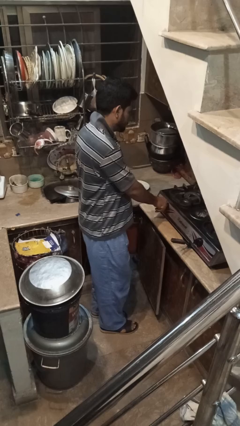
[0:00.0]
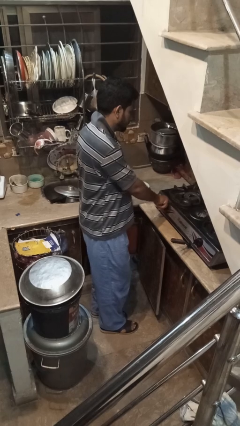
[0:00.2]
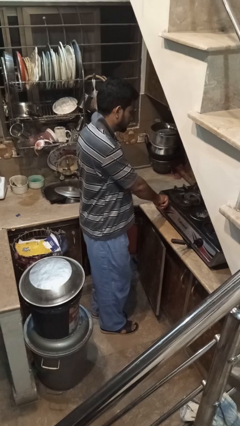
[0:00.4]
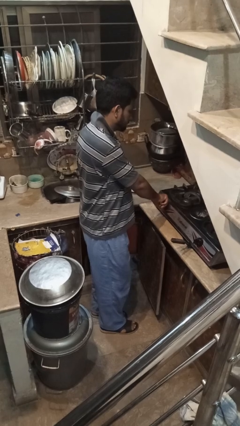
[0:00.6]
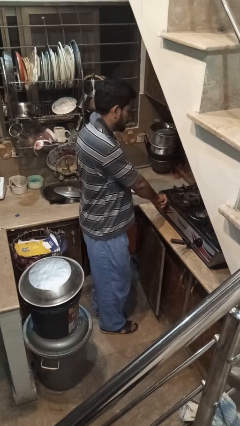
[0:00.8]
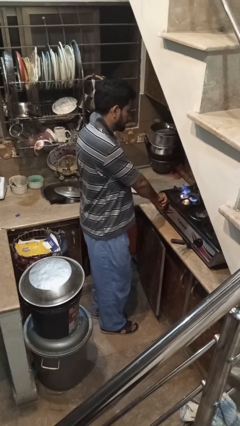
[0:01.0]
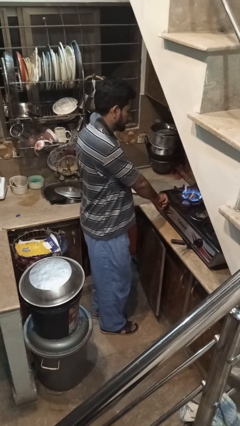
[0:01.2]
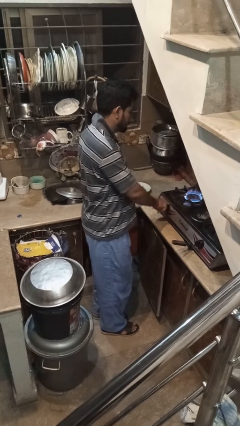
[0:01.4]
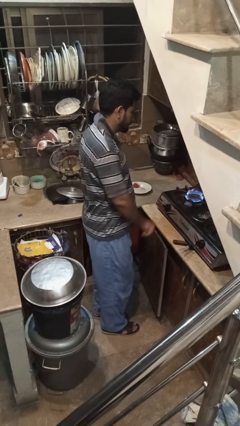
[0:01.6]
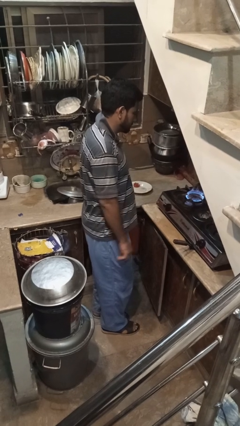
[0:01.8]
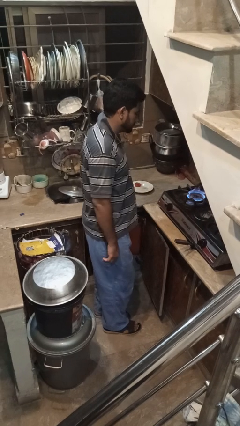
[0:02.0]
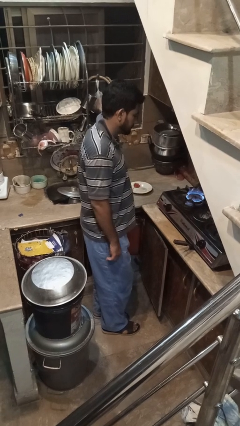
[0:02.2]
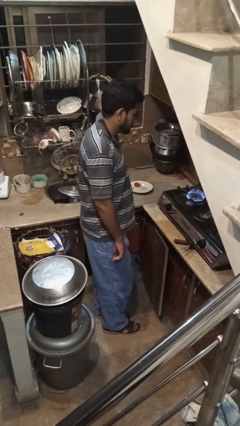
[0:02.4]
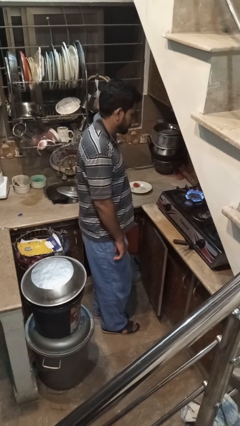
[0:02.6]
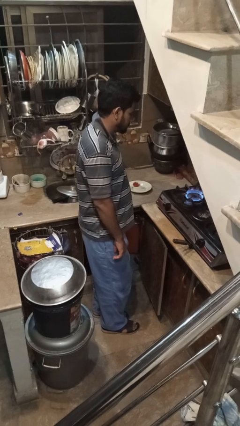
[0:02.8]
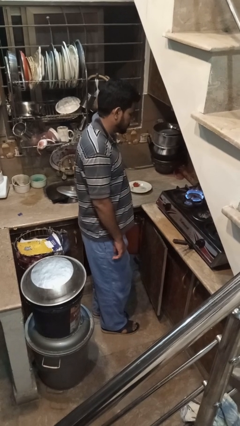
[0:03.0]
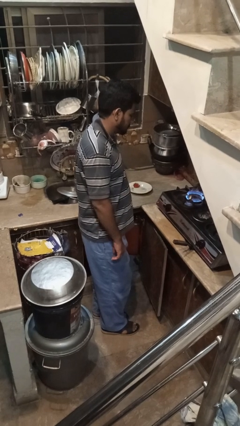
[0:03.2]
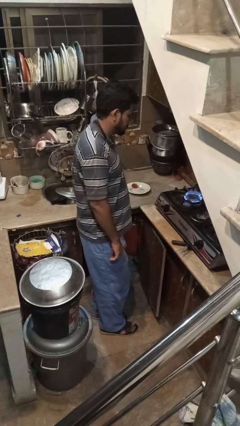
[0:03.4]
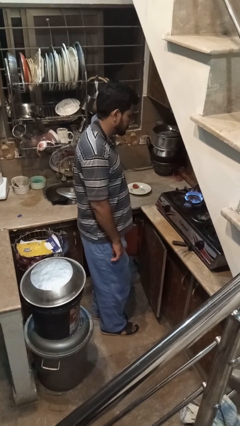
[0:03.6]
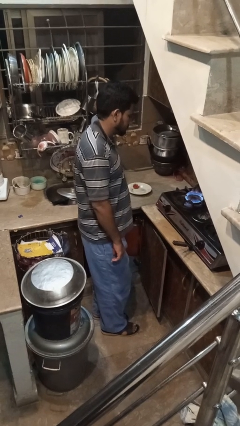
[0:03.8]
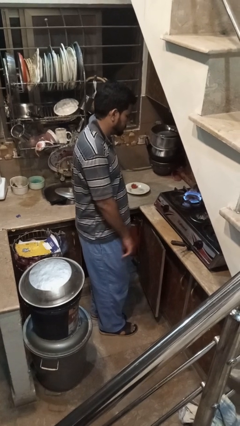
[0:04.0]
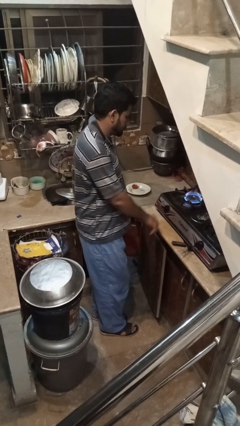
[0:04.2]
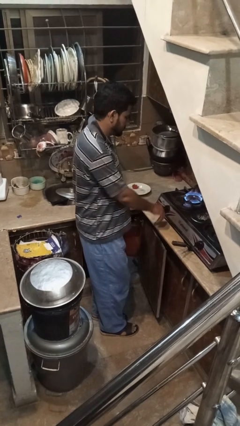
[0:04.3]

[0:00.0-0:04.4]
person turns on stovetop

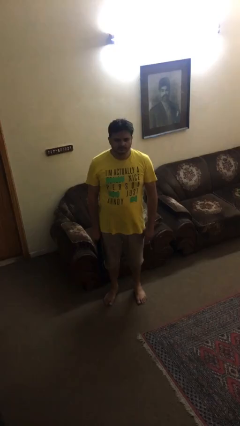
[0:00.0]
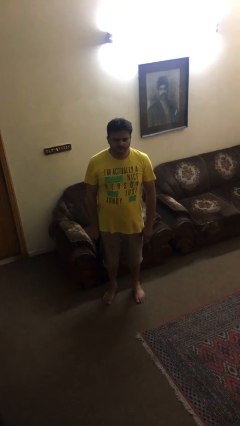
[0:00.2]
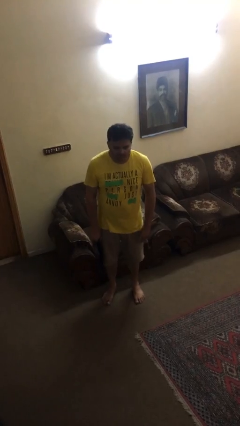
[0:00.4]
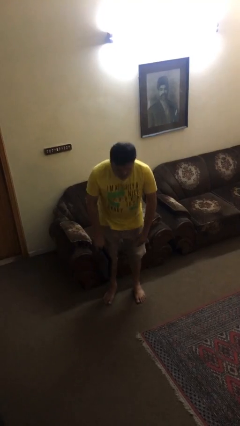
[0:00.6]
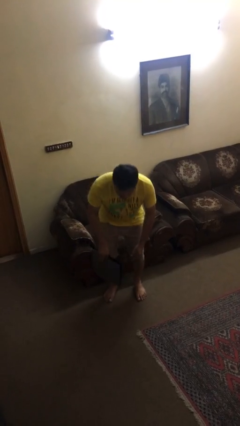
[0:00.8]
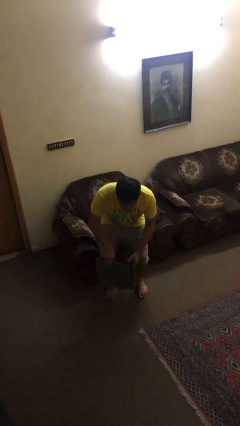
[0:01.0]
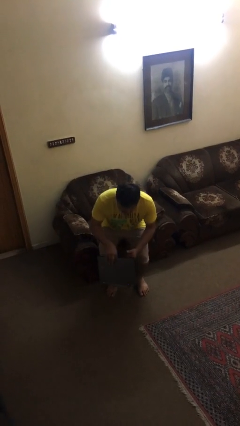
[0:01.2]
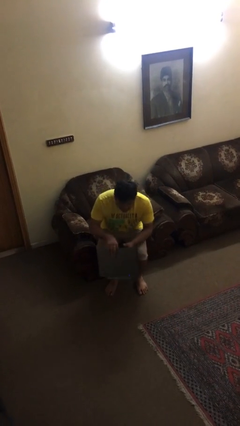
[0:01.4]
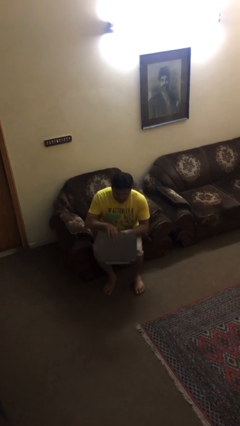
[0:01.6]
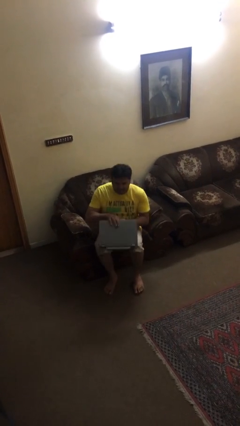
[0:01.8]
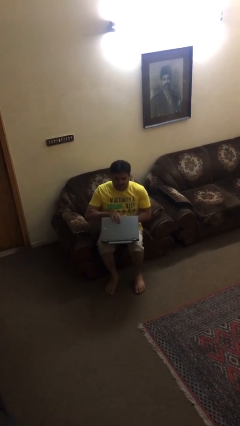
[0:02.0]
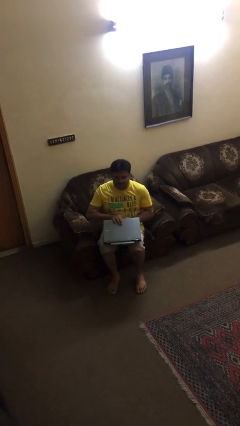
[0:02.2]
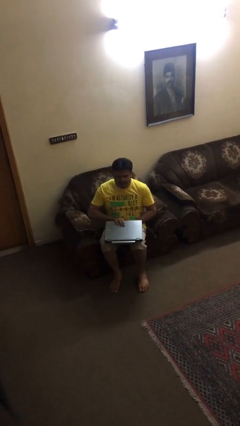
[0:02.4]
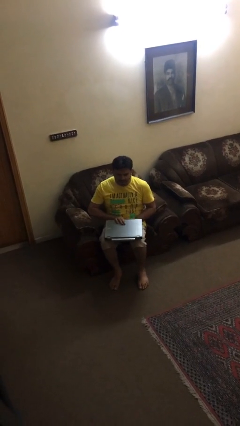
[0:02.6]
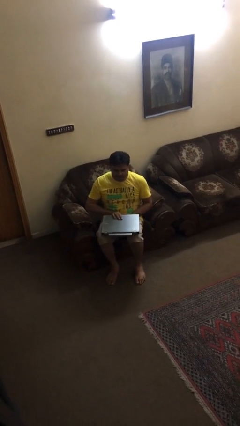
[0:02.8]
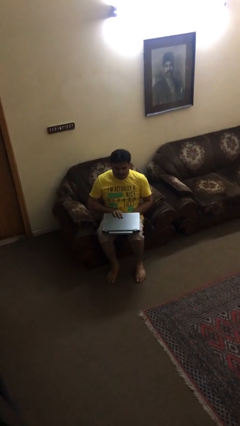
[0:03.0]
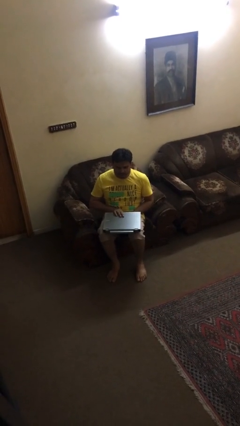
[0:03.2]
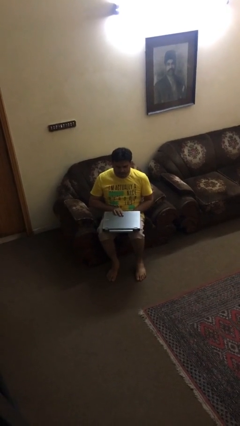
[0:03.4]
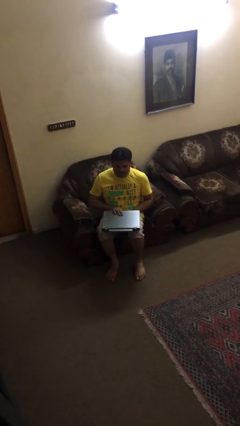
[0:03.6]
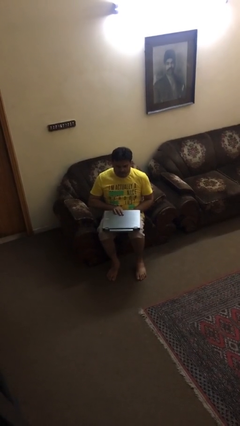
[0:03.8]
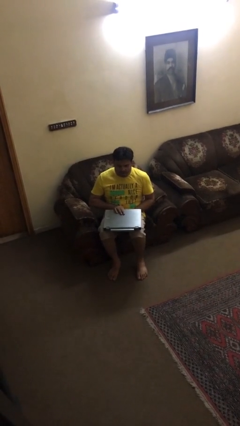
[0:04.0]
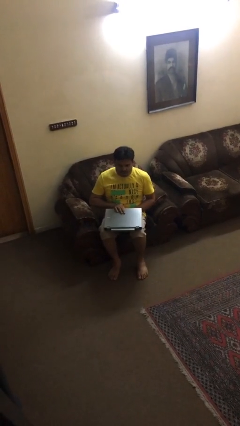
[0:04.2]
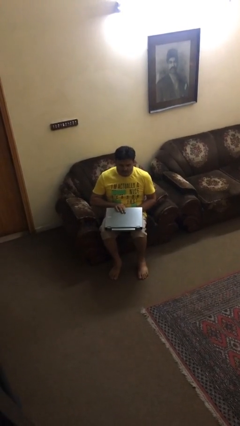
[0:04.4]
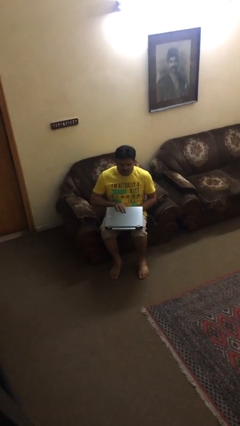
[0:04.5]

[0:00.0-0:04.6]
person sits down

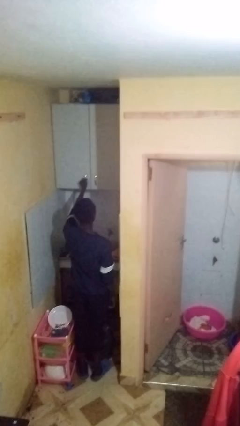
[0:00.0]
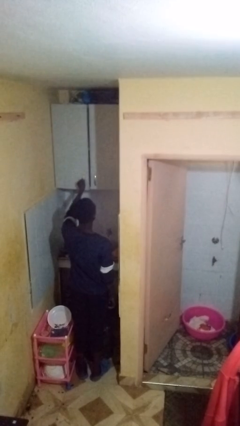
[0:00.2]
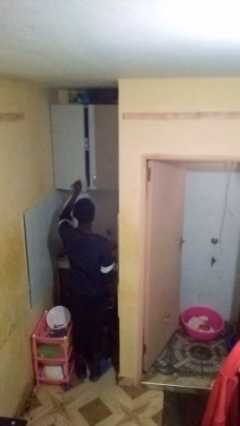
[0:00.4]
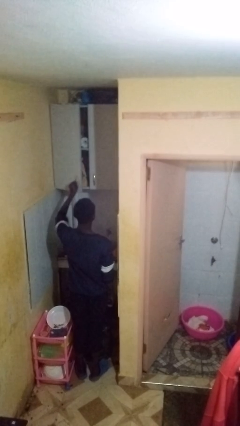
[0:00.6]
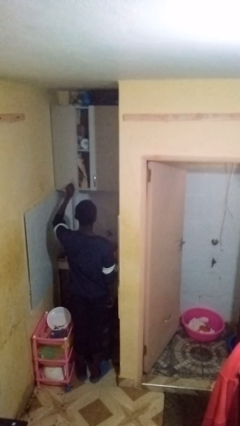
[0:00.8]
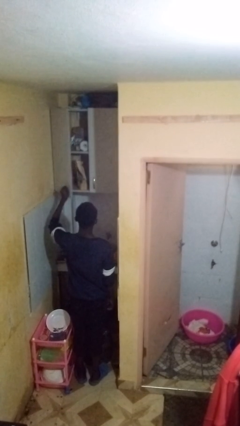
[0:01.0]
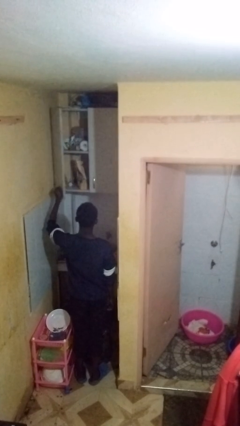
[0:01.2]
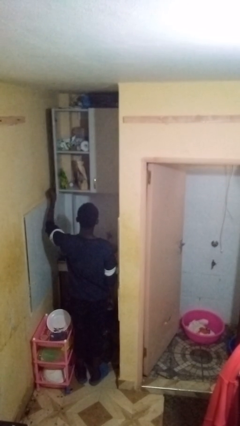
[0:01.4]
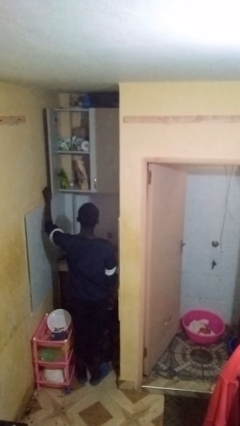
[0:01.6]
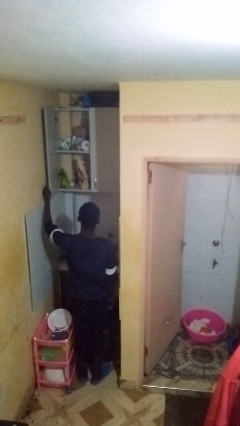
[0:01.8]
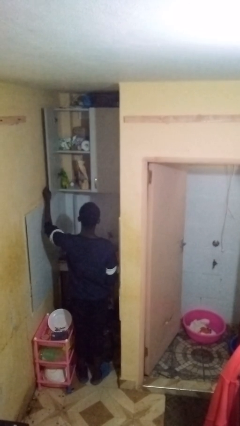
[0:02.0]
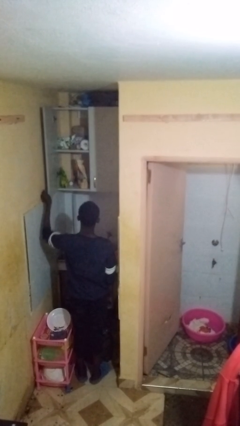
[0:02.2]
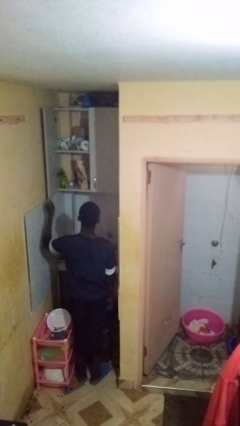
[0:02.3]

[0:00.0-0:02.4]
person opens cabinet

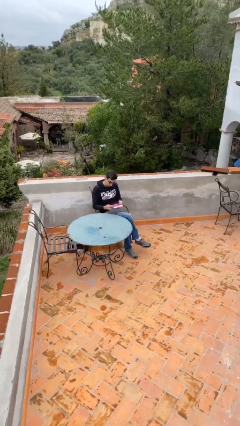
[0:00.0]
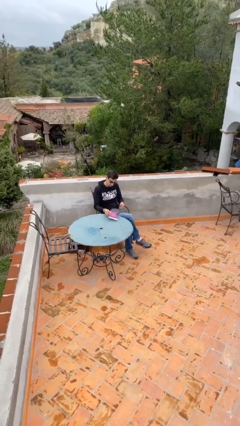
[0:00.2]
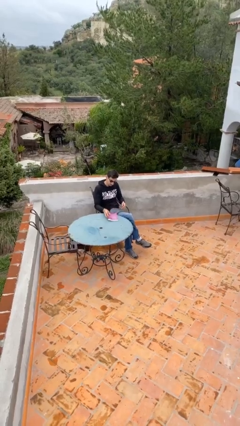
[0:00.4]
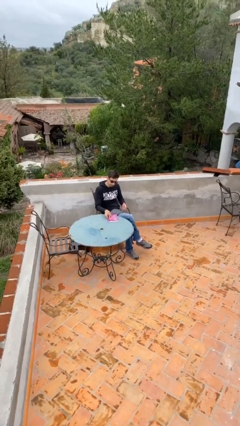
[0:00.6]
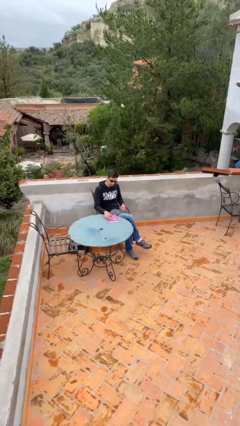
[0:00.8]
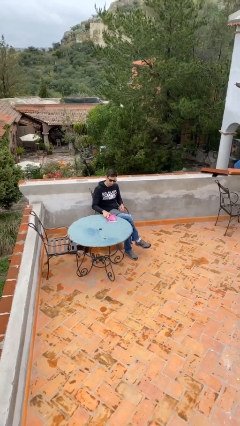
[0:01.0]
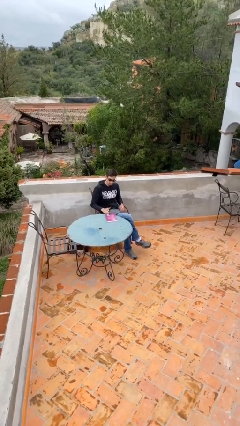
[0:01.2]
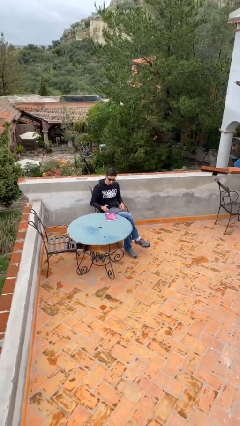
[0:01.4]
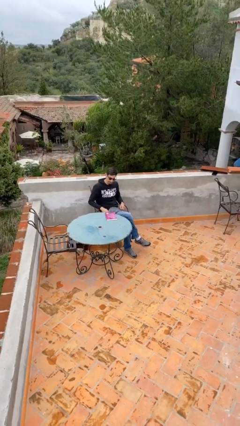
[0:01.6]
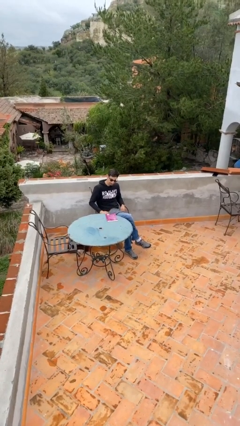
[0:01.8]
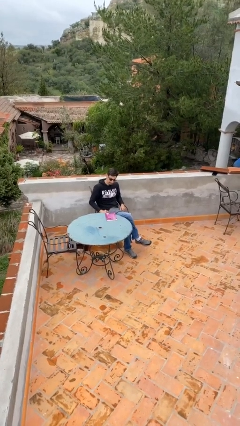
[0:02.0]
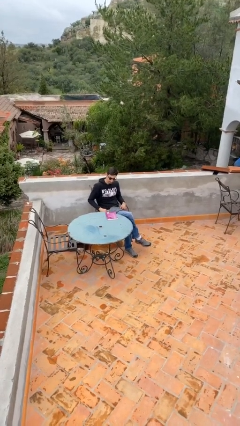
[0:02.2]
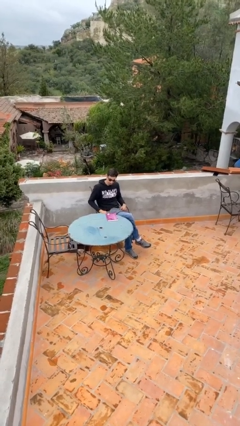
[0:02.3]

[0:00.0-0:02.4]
person puts down object on table

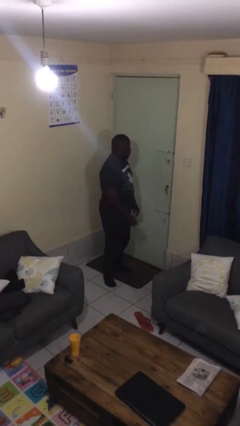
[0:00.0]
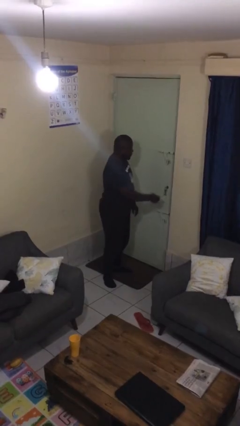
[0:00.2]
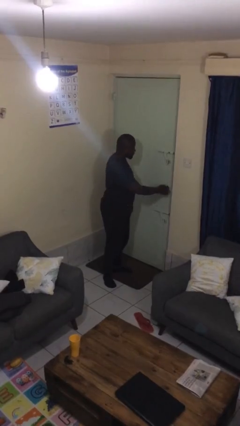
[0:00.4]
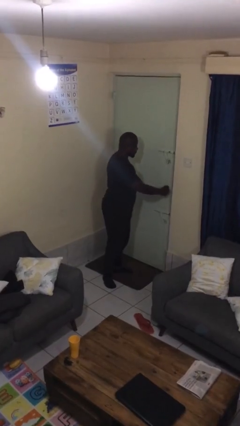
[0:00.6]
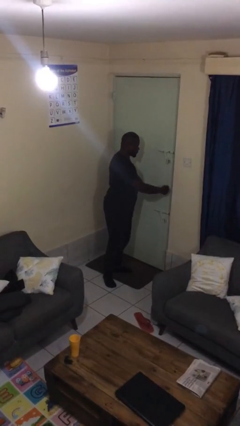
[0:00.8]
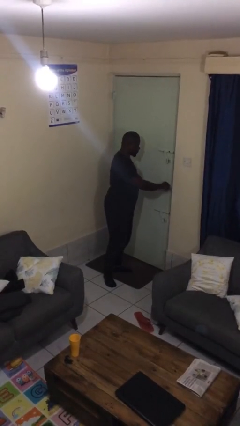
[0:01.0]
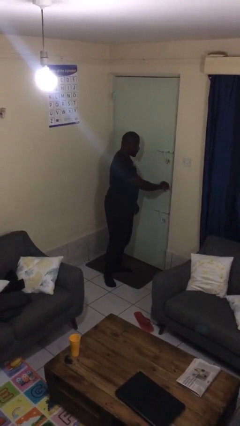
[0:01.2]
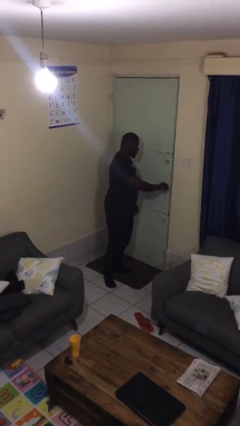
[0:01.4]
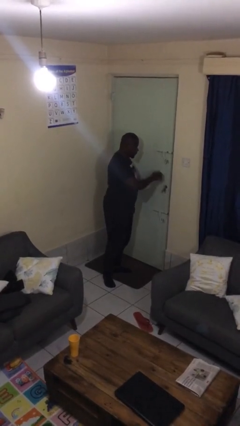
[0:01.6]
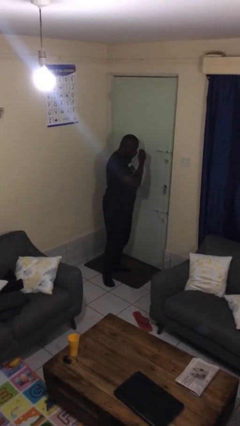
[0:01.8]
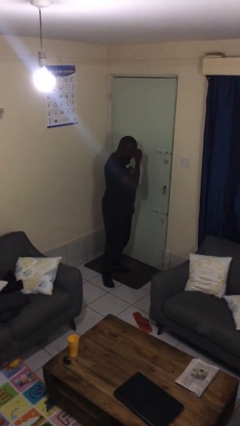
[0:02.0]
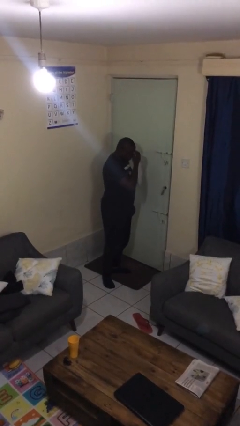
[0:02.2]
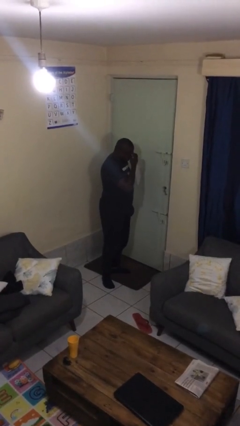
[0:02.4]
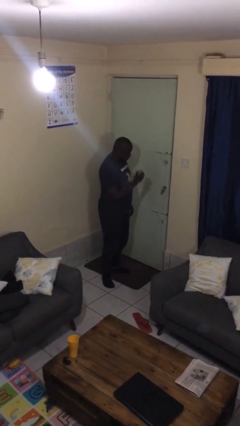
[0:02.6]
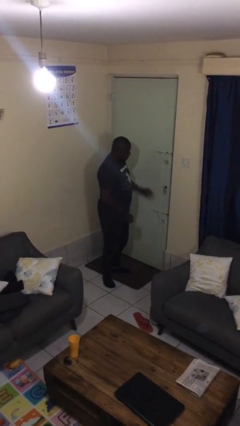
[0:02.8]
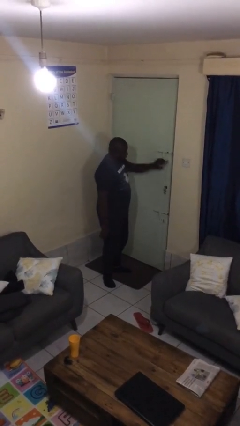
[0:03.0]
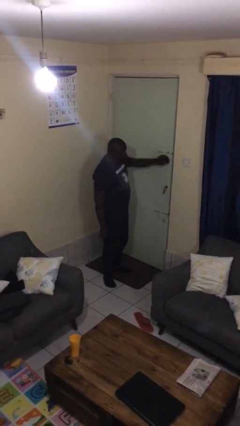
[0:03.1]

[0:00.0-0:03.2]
person unlocks door with keys

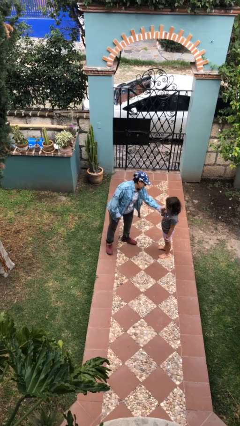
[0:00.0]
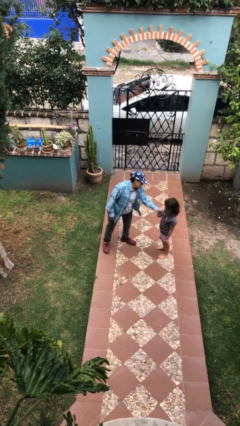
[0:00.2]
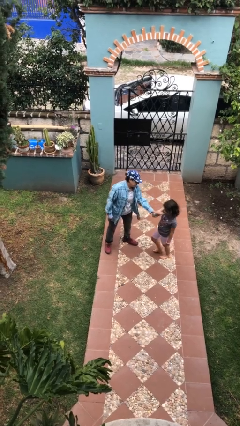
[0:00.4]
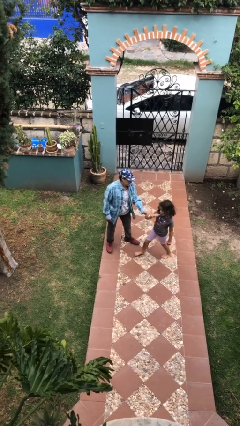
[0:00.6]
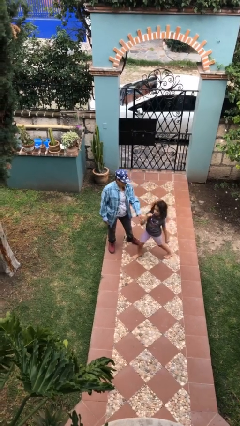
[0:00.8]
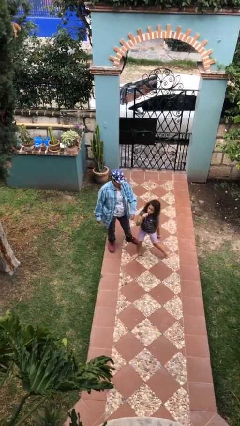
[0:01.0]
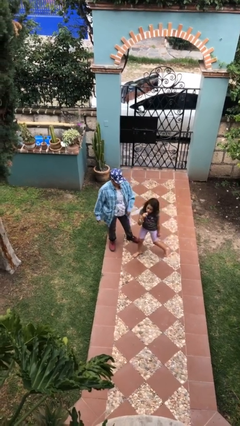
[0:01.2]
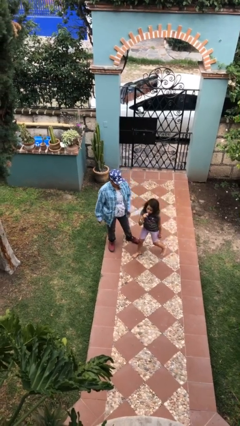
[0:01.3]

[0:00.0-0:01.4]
person grabs person by bicep
